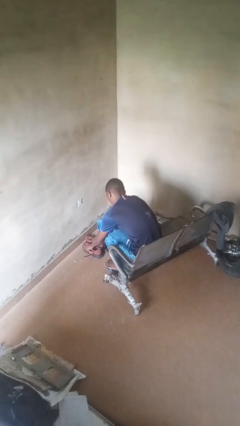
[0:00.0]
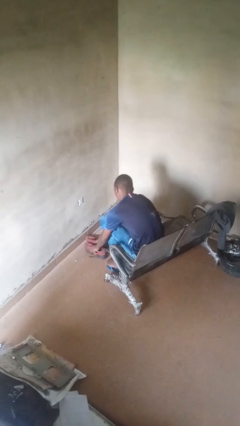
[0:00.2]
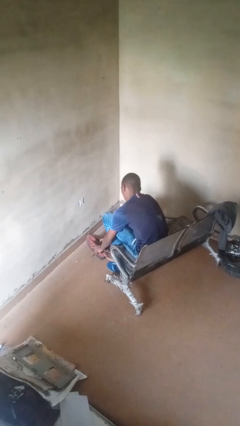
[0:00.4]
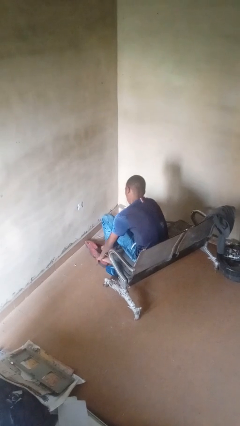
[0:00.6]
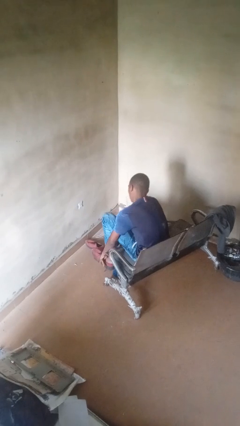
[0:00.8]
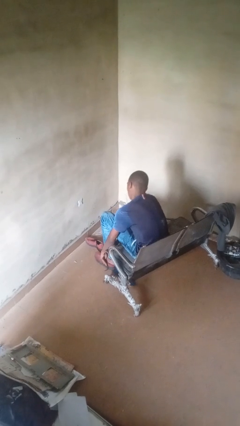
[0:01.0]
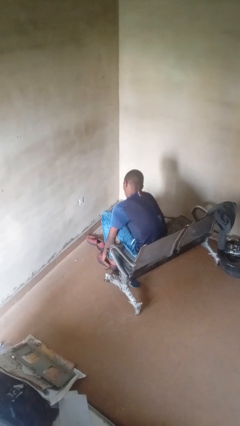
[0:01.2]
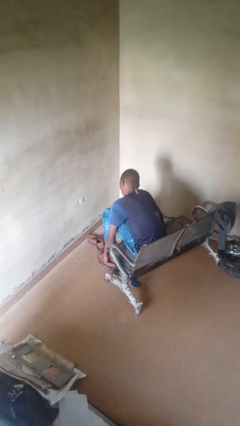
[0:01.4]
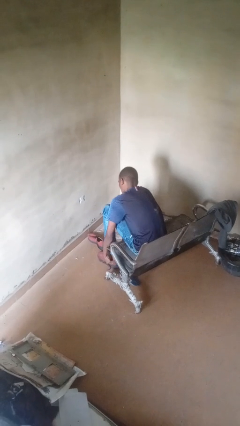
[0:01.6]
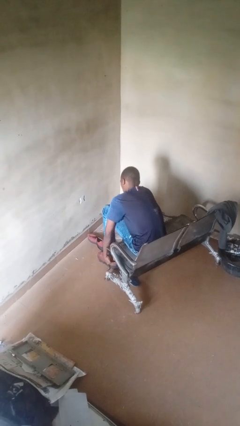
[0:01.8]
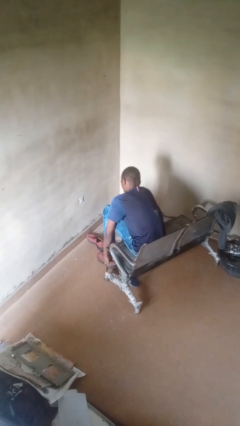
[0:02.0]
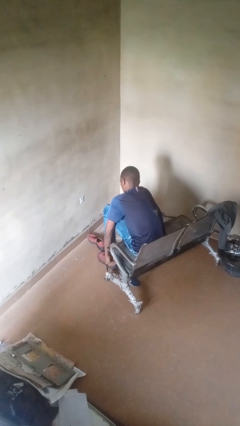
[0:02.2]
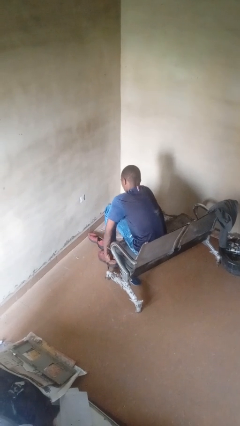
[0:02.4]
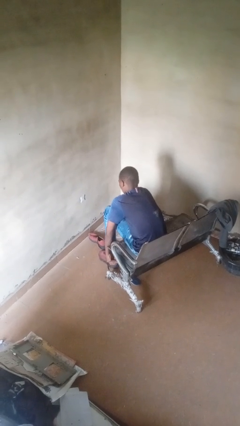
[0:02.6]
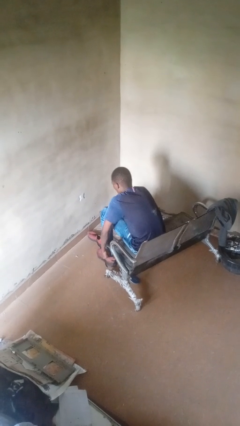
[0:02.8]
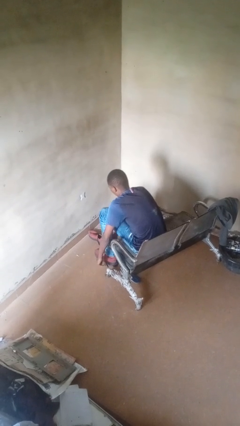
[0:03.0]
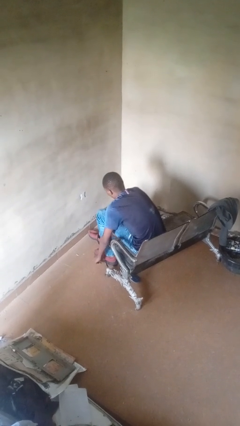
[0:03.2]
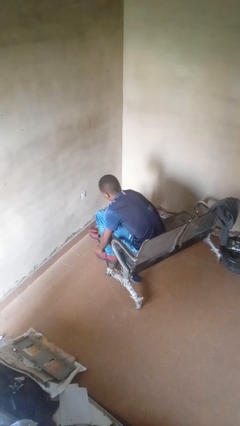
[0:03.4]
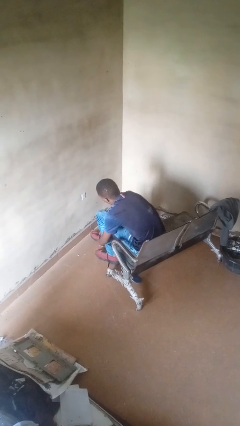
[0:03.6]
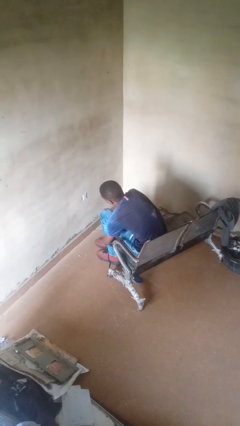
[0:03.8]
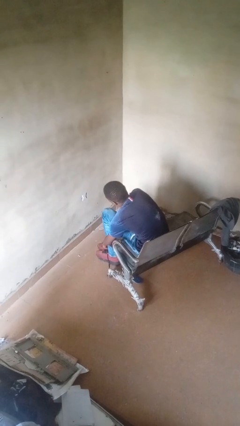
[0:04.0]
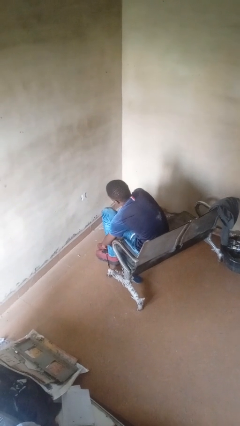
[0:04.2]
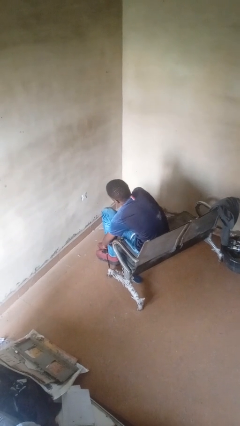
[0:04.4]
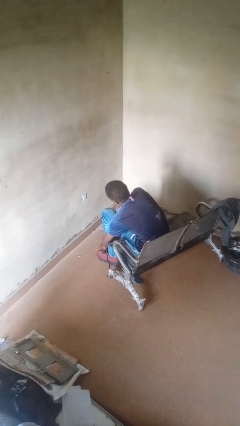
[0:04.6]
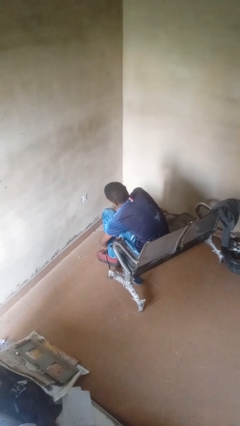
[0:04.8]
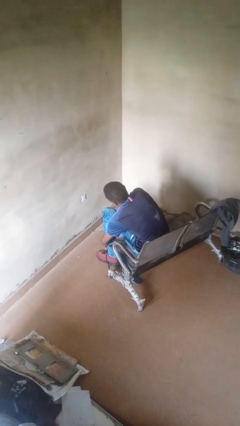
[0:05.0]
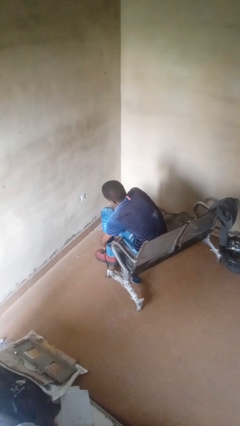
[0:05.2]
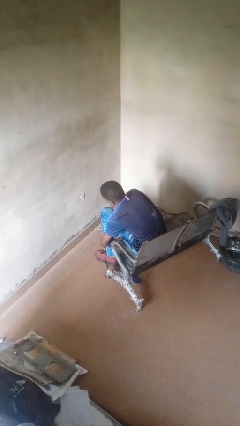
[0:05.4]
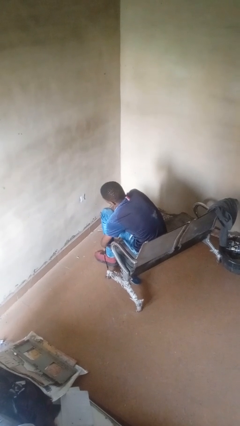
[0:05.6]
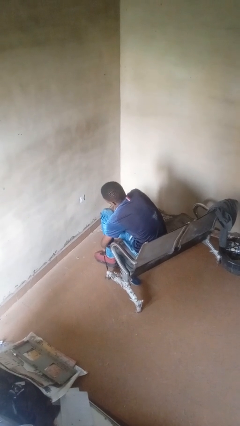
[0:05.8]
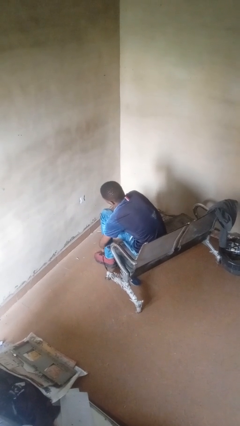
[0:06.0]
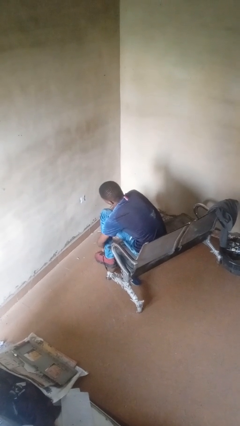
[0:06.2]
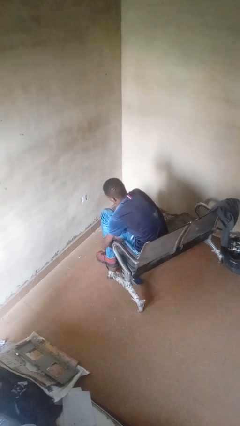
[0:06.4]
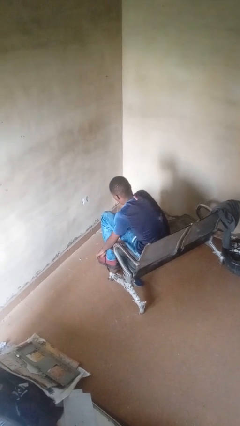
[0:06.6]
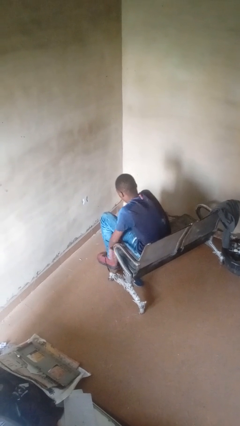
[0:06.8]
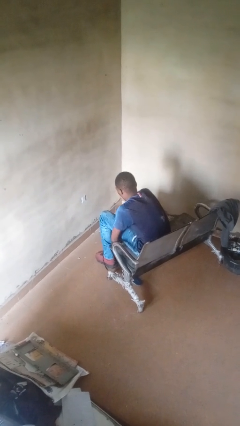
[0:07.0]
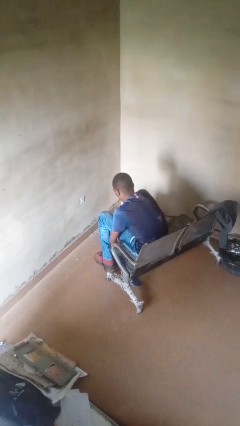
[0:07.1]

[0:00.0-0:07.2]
person puts on shoes

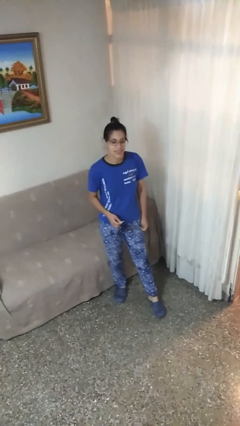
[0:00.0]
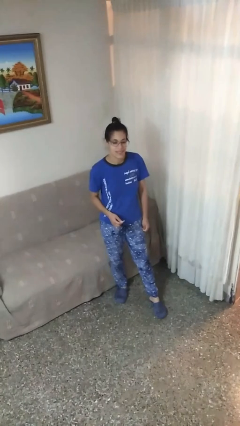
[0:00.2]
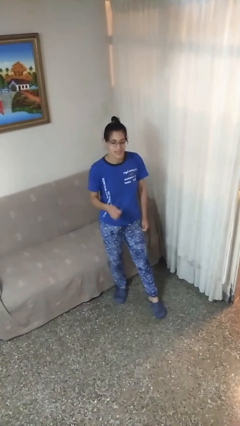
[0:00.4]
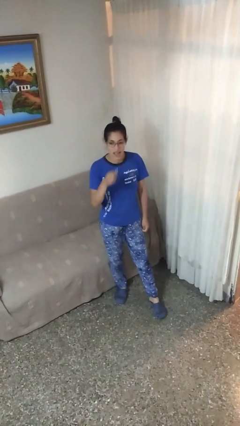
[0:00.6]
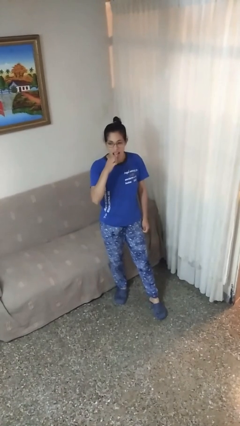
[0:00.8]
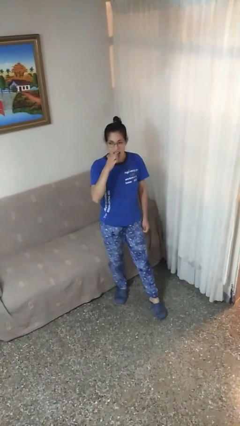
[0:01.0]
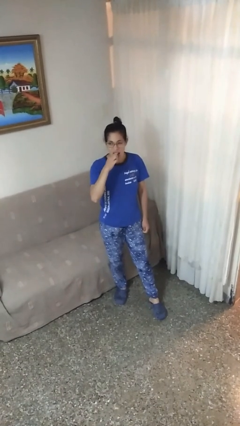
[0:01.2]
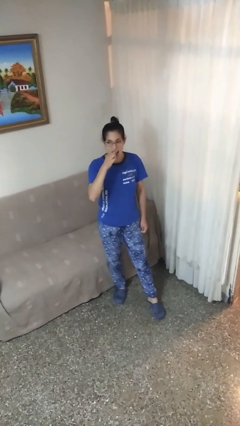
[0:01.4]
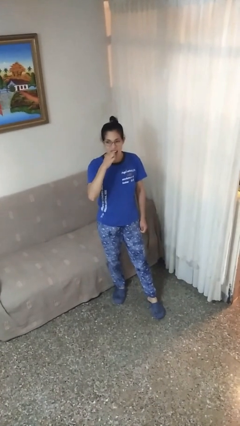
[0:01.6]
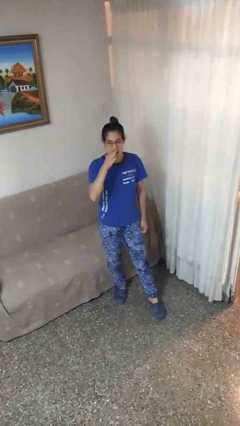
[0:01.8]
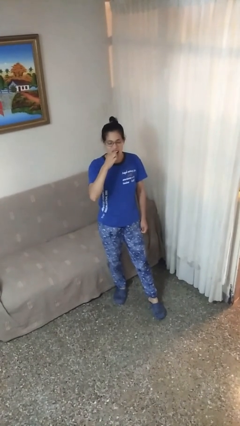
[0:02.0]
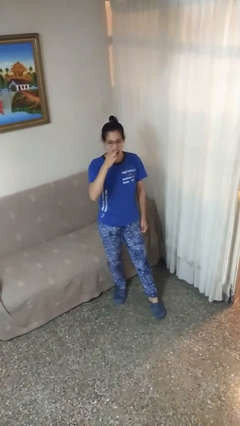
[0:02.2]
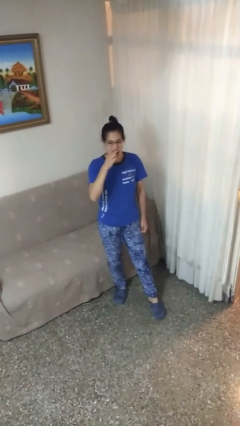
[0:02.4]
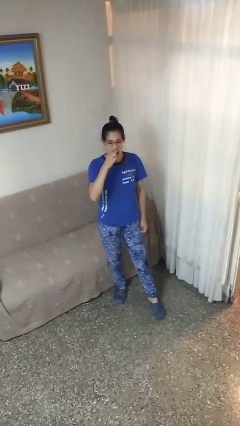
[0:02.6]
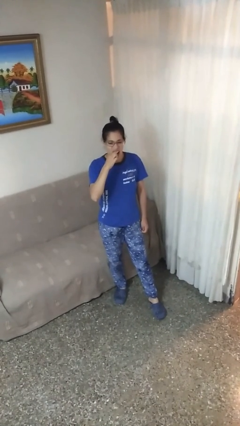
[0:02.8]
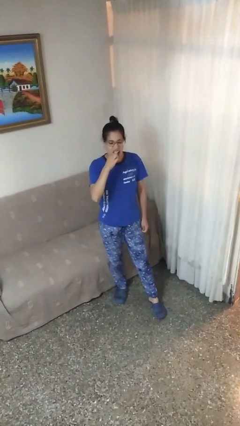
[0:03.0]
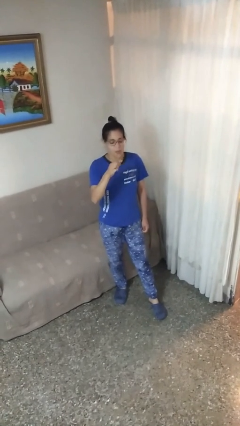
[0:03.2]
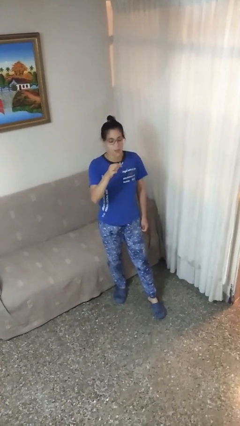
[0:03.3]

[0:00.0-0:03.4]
person flosses

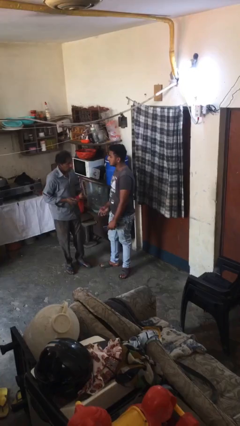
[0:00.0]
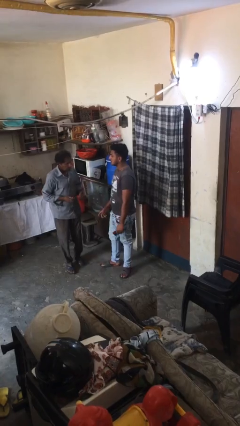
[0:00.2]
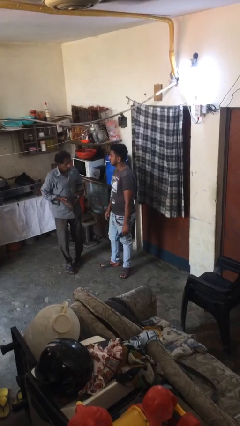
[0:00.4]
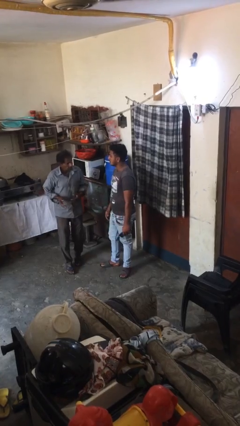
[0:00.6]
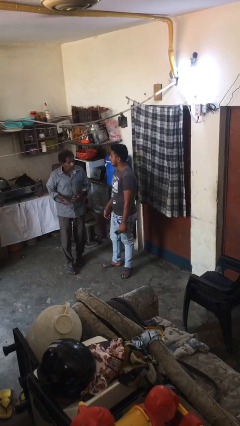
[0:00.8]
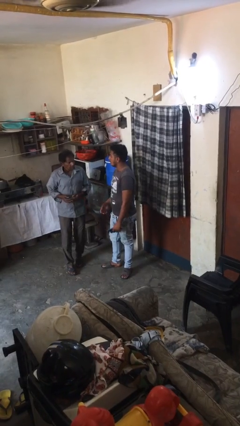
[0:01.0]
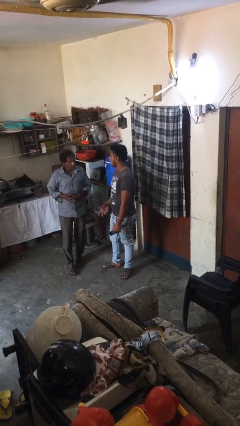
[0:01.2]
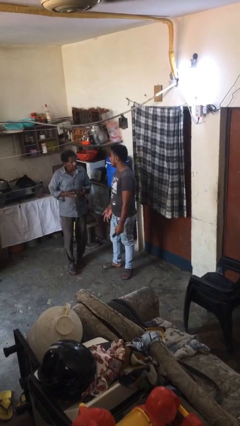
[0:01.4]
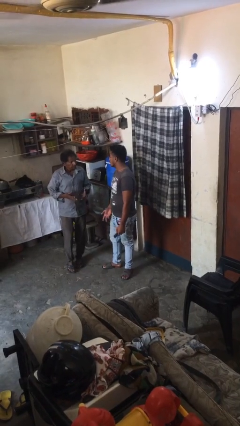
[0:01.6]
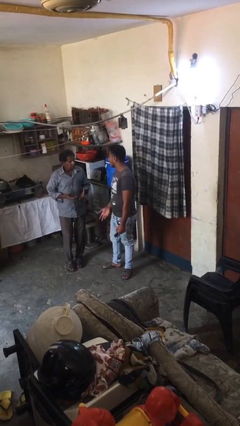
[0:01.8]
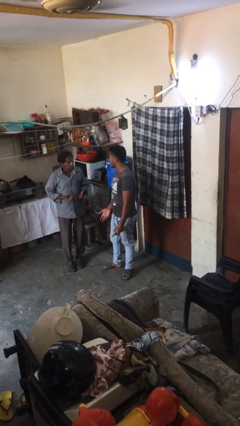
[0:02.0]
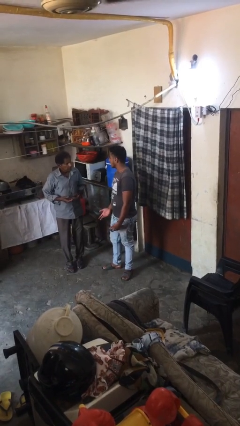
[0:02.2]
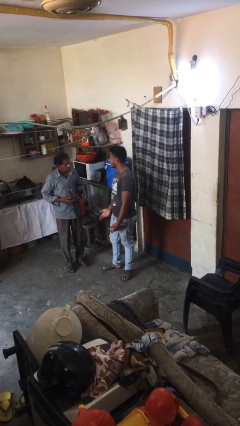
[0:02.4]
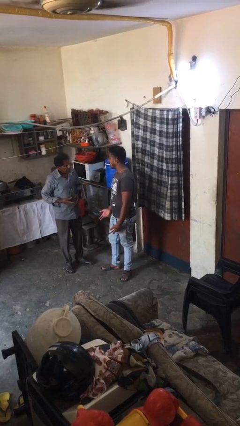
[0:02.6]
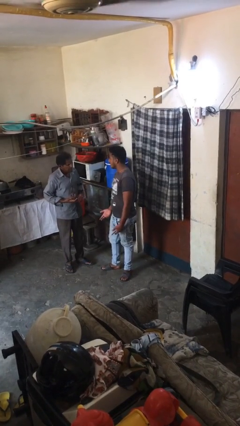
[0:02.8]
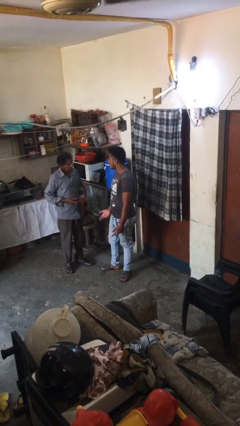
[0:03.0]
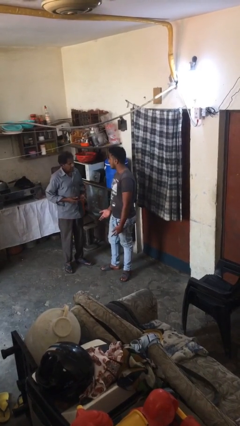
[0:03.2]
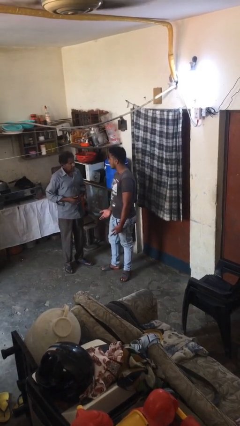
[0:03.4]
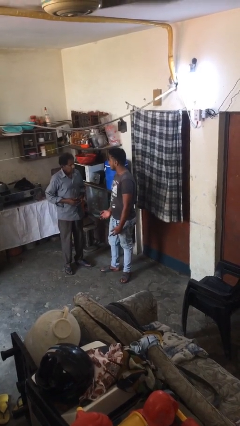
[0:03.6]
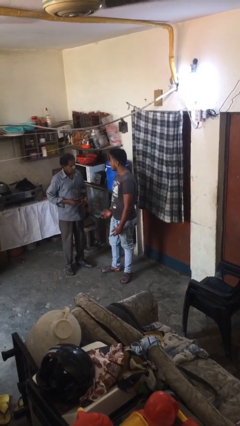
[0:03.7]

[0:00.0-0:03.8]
person talks to person

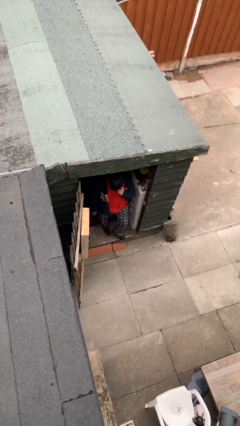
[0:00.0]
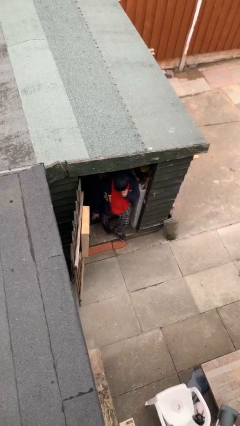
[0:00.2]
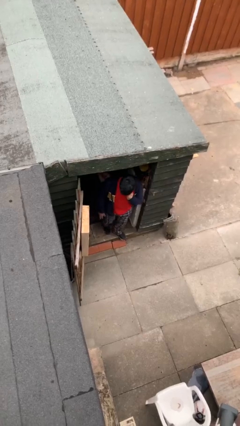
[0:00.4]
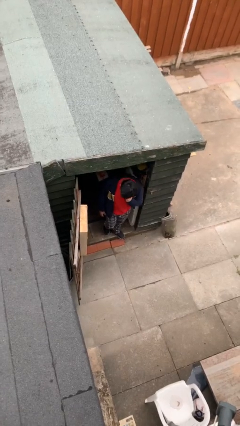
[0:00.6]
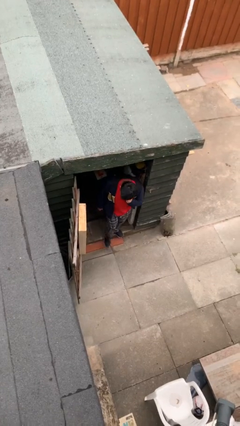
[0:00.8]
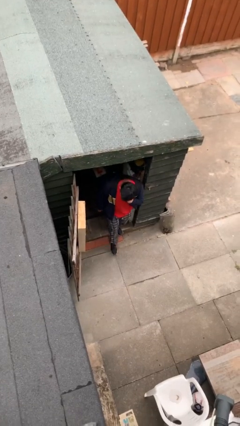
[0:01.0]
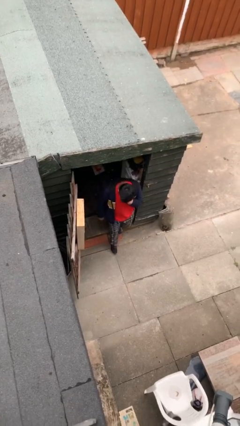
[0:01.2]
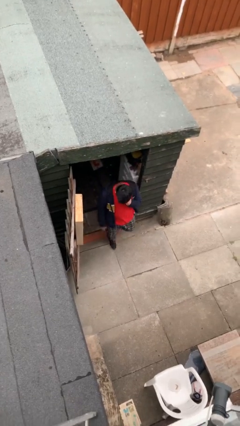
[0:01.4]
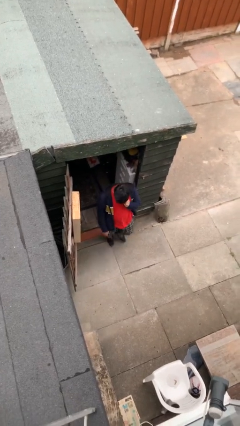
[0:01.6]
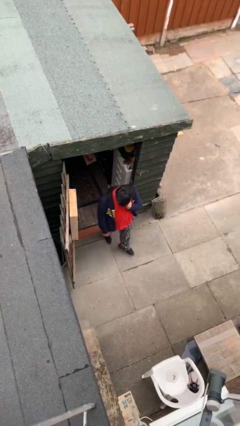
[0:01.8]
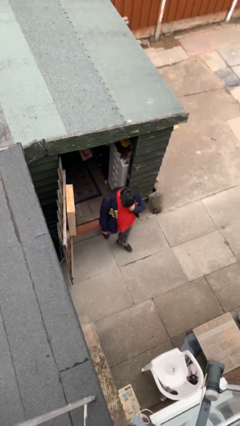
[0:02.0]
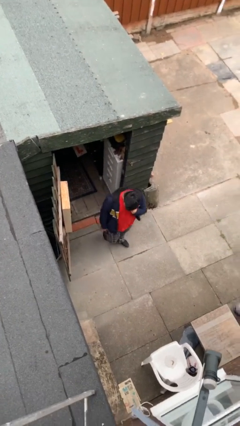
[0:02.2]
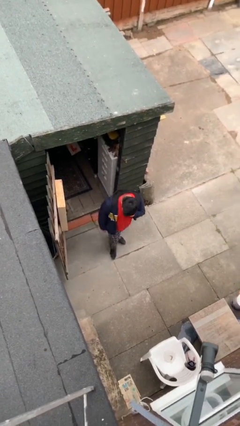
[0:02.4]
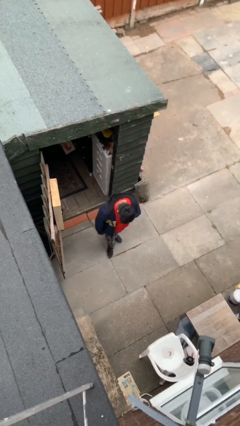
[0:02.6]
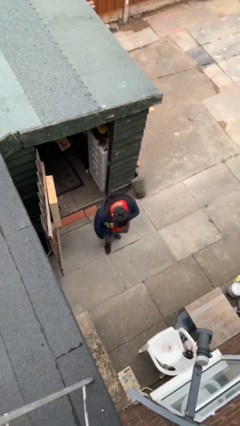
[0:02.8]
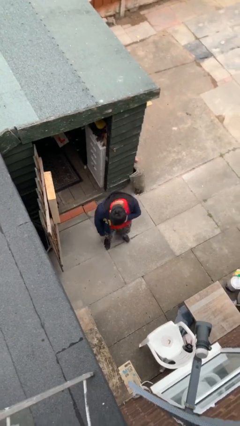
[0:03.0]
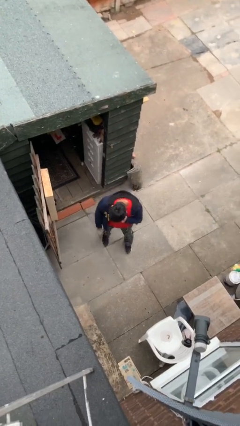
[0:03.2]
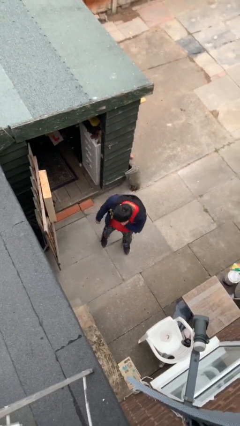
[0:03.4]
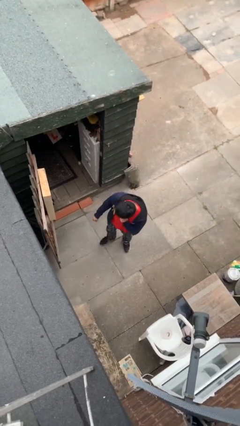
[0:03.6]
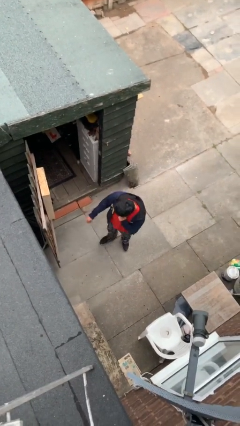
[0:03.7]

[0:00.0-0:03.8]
person enters scene through structure
